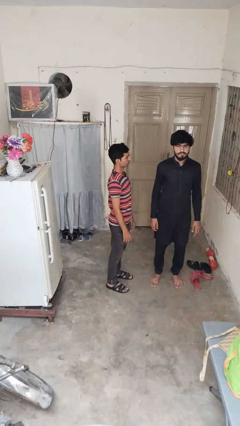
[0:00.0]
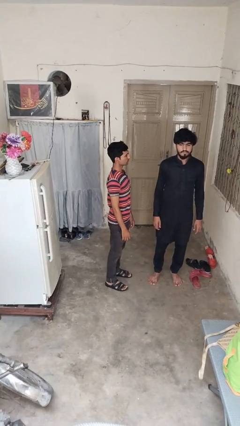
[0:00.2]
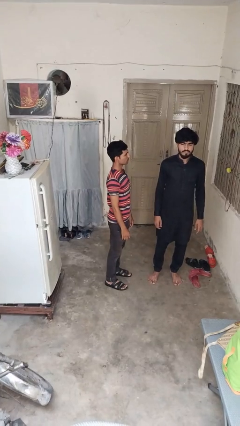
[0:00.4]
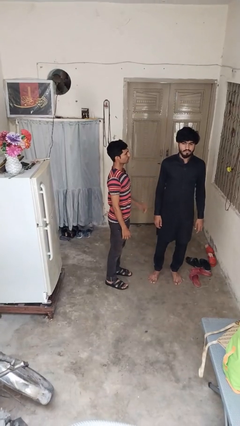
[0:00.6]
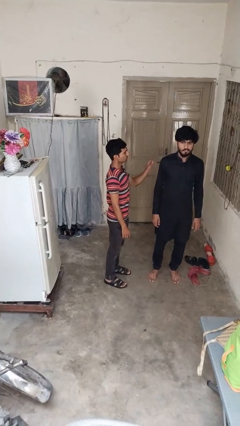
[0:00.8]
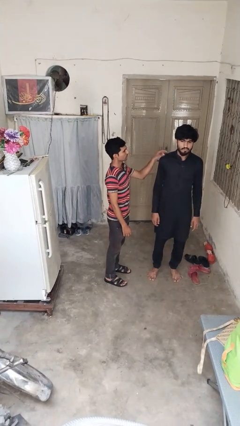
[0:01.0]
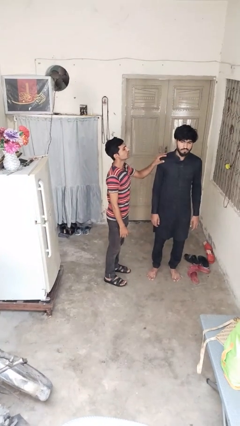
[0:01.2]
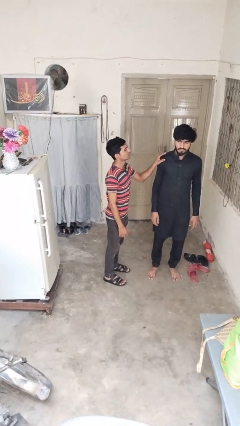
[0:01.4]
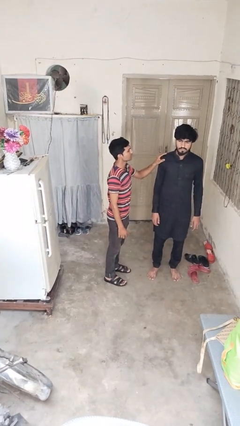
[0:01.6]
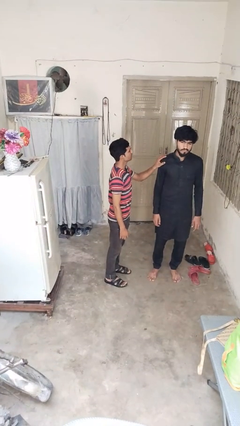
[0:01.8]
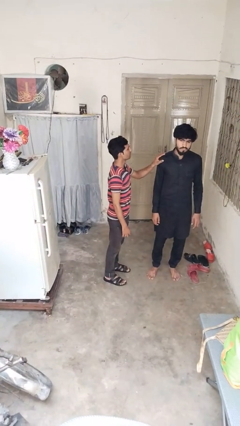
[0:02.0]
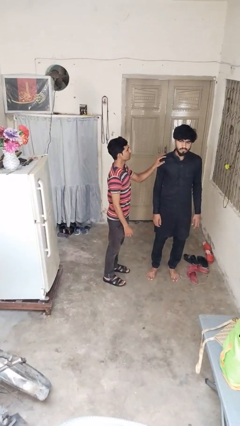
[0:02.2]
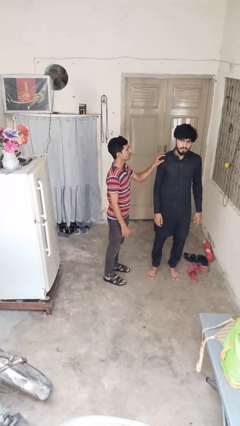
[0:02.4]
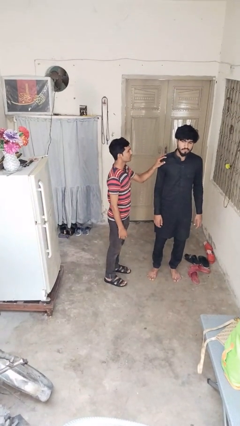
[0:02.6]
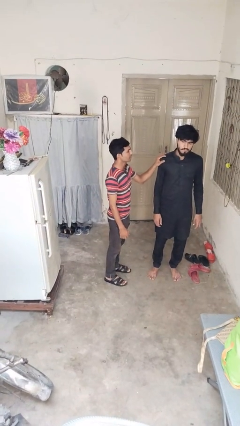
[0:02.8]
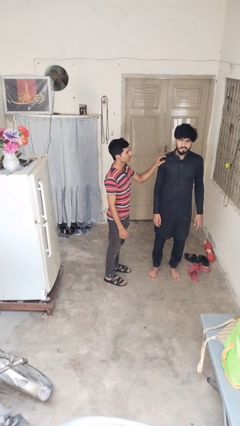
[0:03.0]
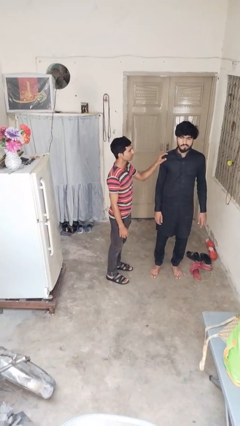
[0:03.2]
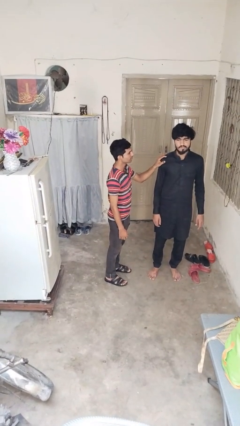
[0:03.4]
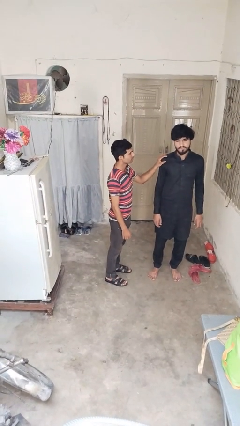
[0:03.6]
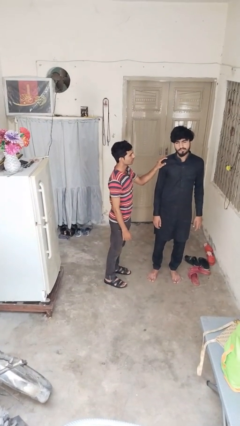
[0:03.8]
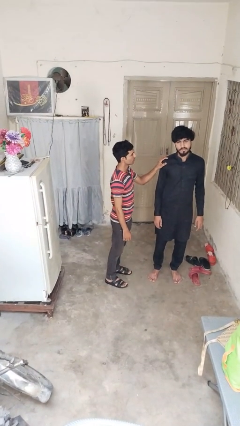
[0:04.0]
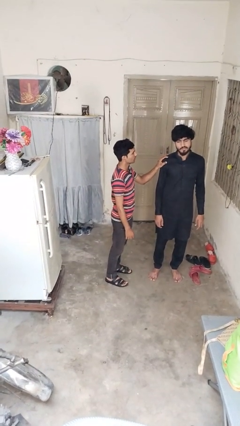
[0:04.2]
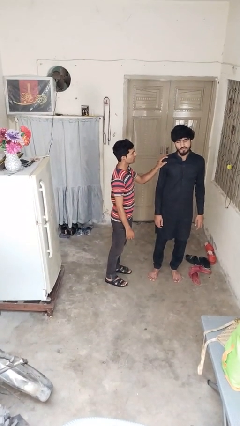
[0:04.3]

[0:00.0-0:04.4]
person grabs person by shoulder

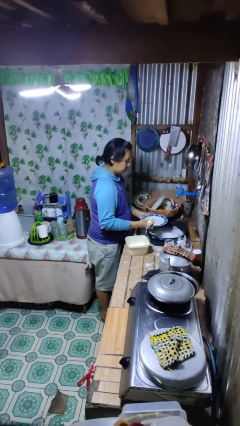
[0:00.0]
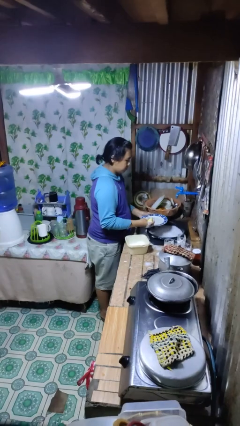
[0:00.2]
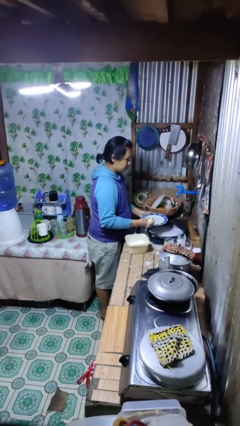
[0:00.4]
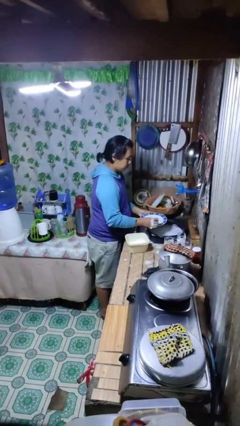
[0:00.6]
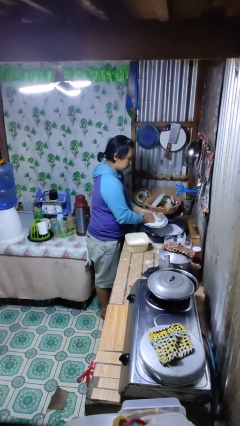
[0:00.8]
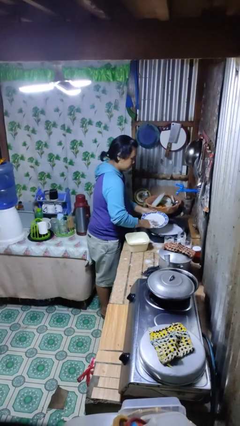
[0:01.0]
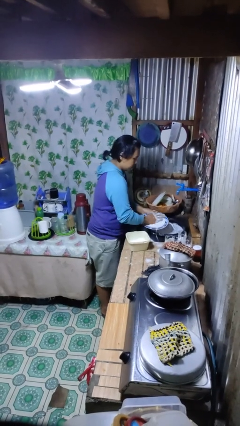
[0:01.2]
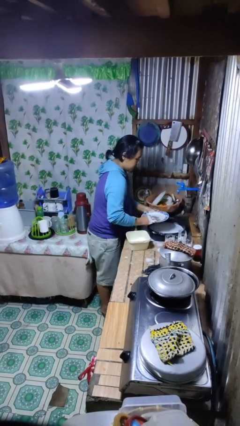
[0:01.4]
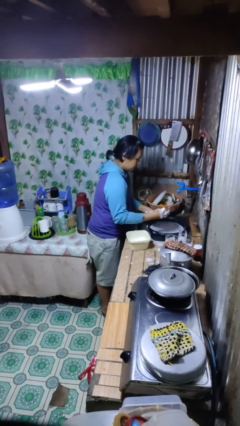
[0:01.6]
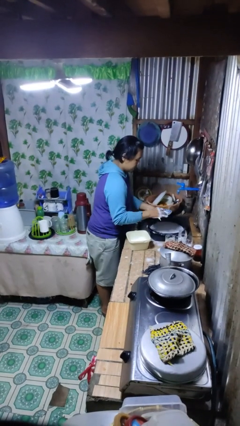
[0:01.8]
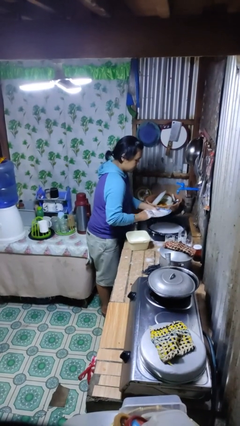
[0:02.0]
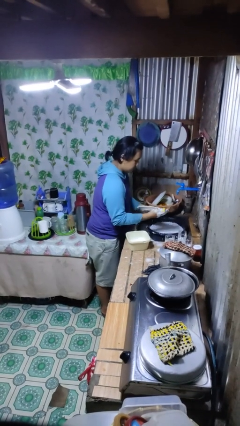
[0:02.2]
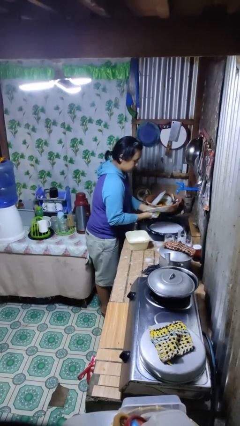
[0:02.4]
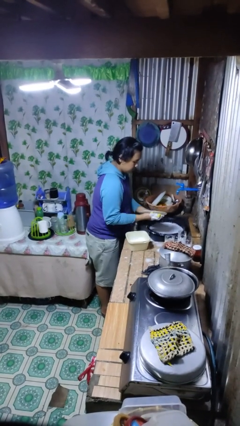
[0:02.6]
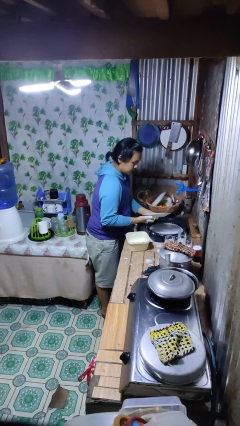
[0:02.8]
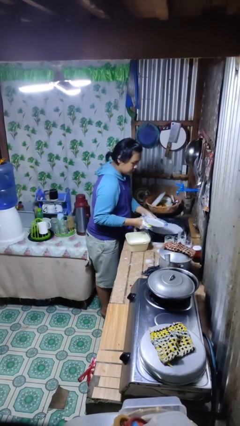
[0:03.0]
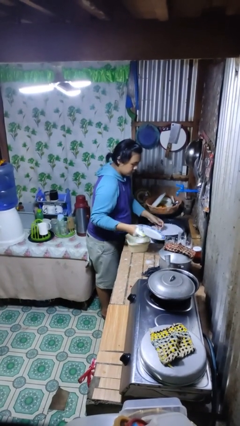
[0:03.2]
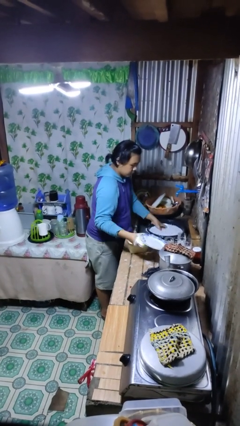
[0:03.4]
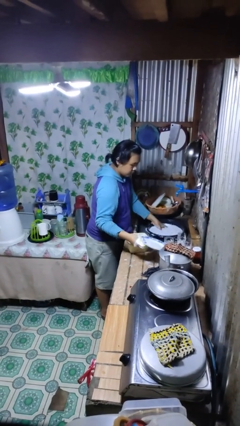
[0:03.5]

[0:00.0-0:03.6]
person washes dish

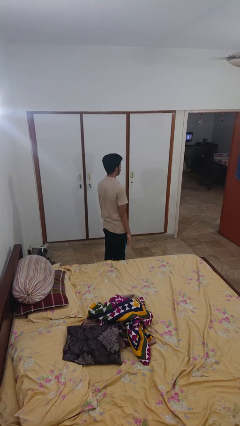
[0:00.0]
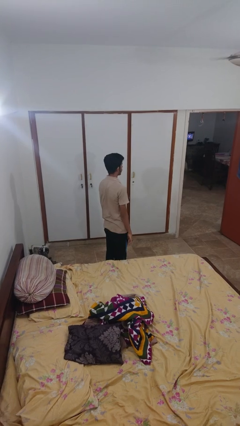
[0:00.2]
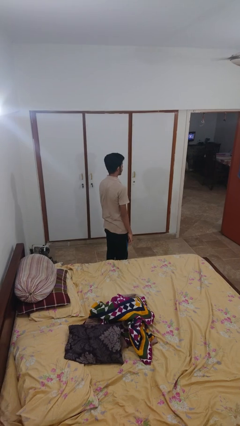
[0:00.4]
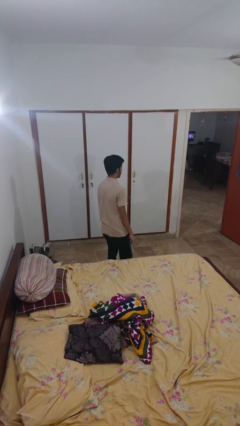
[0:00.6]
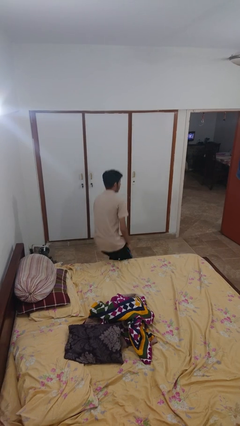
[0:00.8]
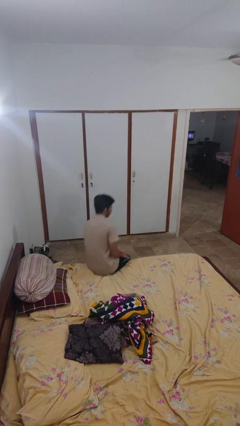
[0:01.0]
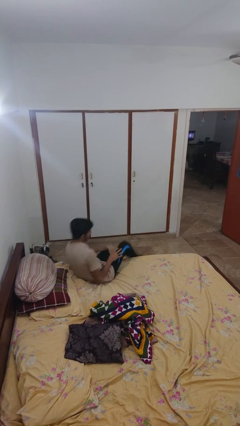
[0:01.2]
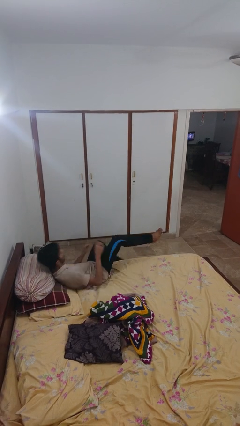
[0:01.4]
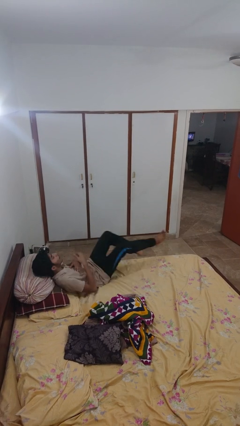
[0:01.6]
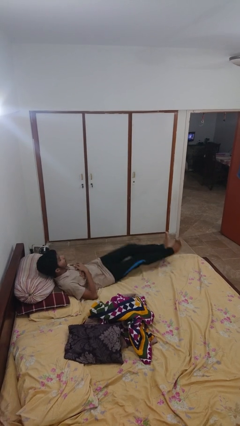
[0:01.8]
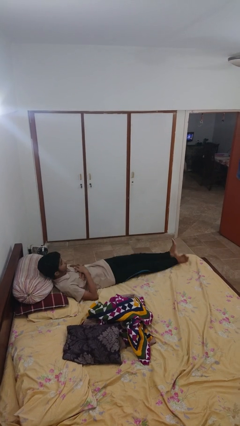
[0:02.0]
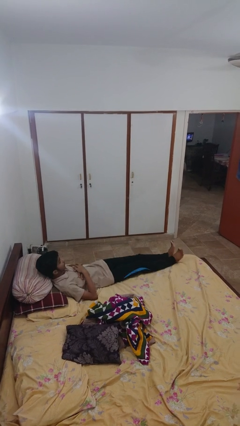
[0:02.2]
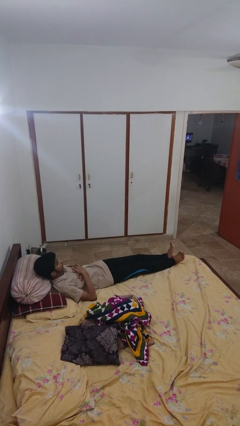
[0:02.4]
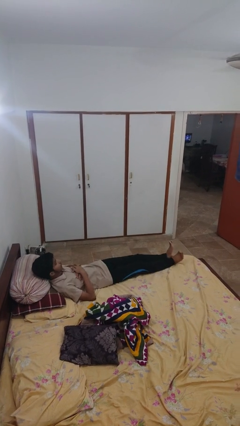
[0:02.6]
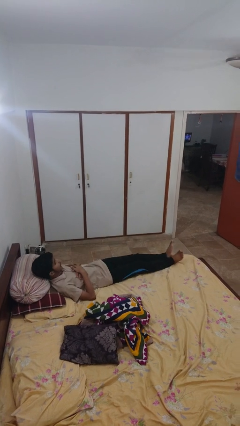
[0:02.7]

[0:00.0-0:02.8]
person lies down on bed

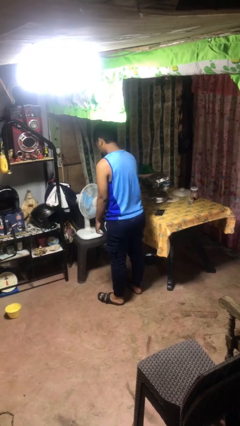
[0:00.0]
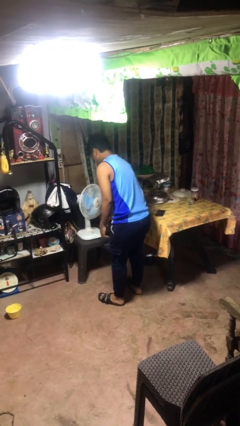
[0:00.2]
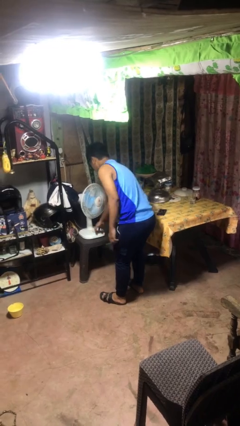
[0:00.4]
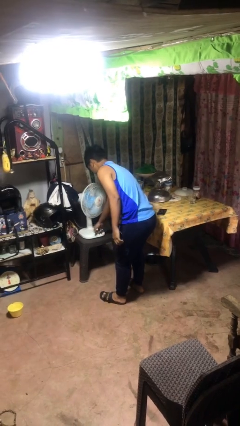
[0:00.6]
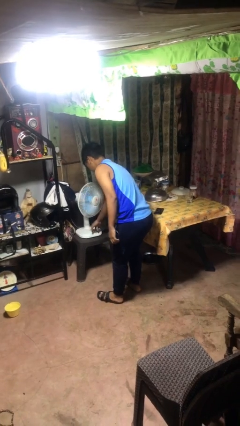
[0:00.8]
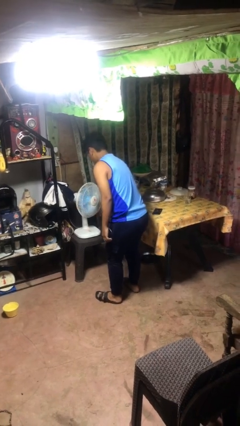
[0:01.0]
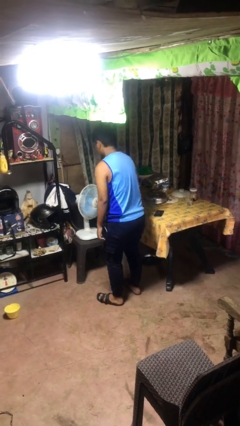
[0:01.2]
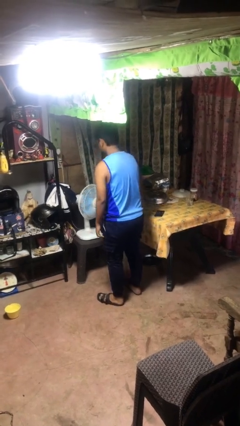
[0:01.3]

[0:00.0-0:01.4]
person turns on fan

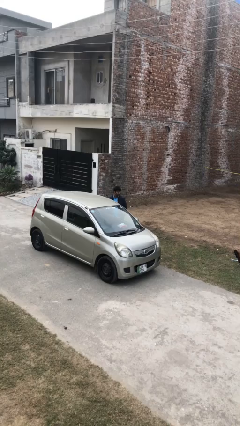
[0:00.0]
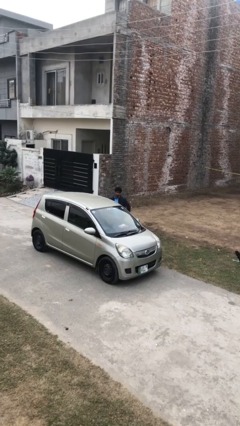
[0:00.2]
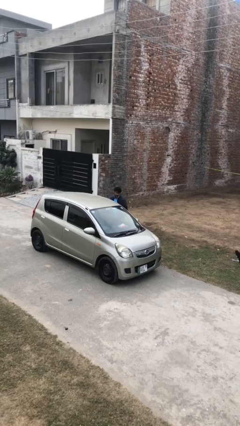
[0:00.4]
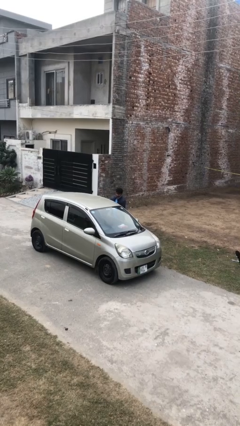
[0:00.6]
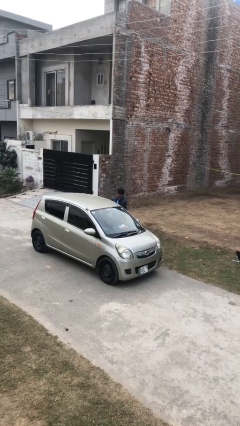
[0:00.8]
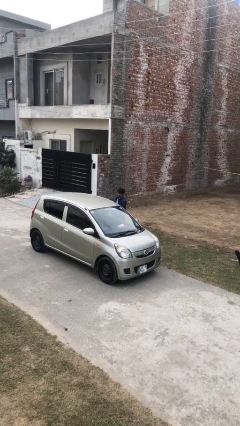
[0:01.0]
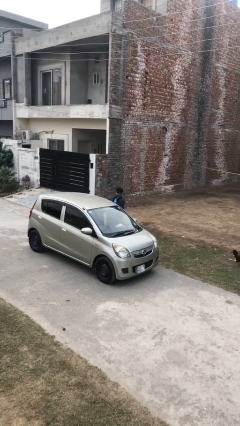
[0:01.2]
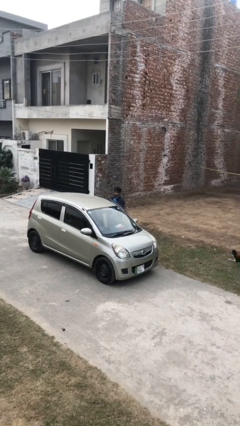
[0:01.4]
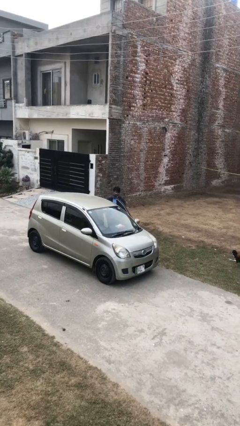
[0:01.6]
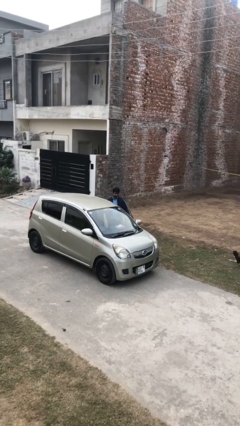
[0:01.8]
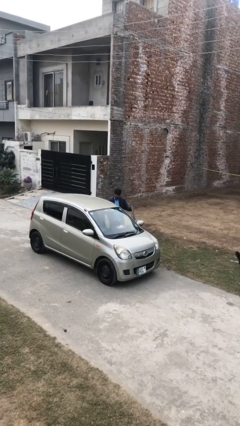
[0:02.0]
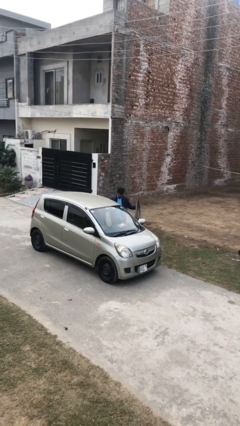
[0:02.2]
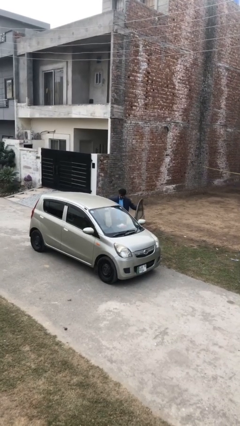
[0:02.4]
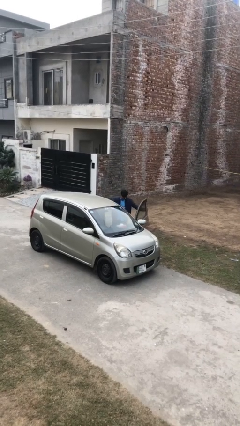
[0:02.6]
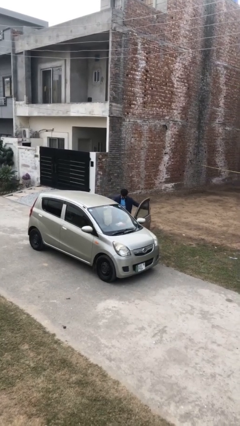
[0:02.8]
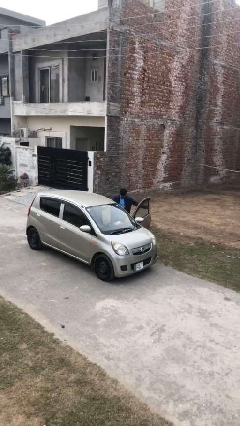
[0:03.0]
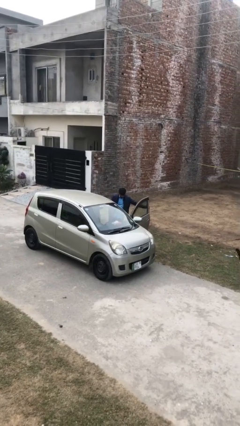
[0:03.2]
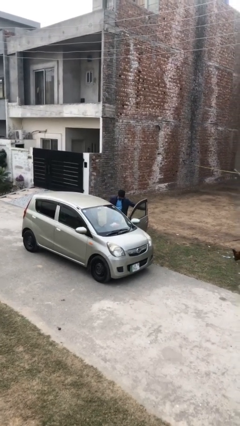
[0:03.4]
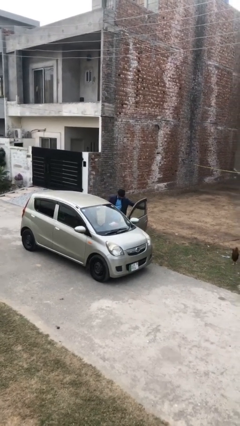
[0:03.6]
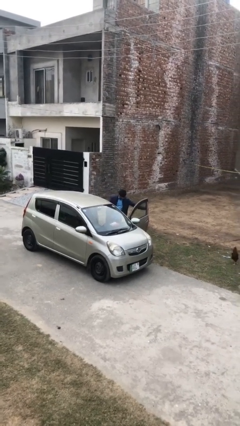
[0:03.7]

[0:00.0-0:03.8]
person opens car door

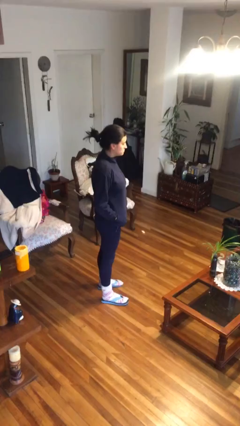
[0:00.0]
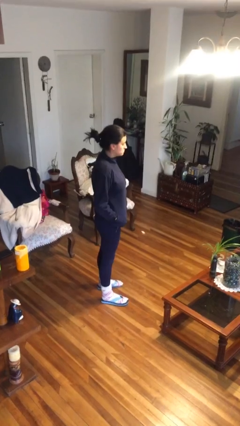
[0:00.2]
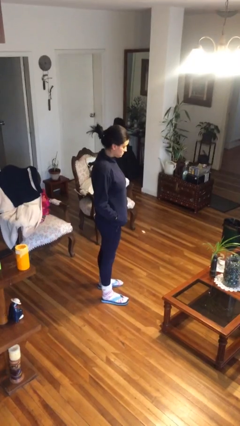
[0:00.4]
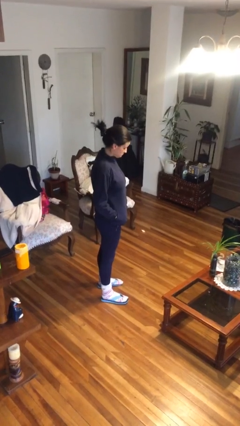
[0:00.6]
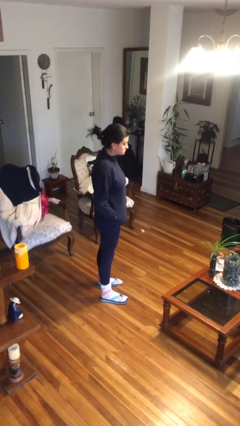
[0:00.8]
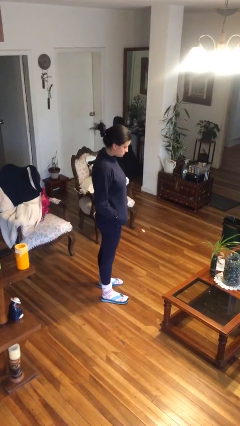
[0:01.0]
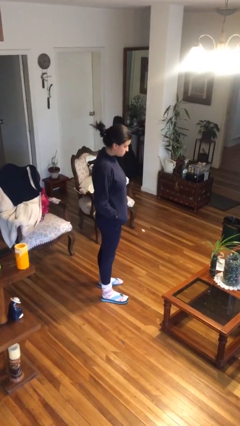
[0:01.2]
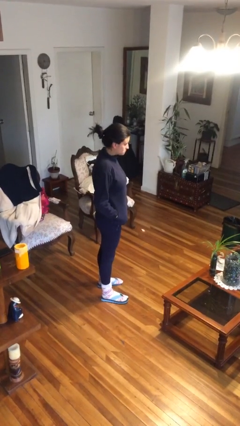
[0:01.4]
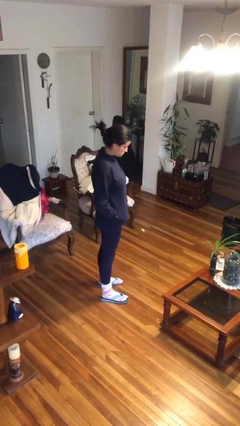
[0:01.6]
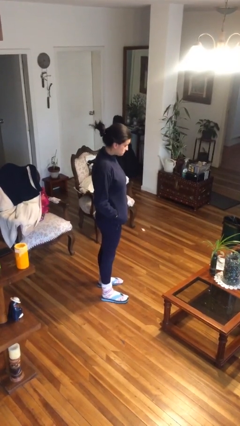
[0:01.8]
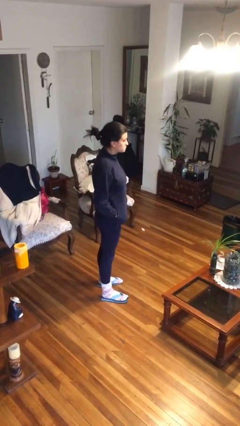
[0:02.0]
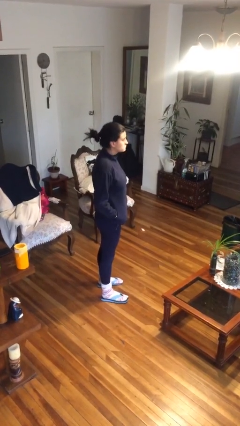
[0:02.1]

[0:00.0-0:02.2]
person nods head
